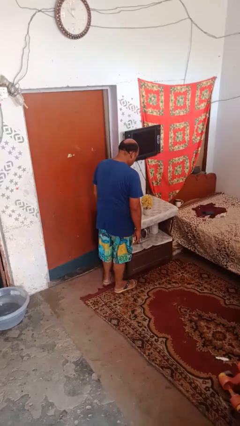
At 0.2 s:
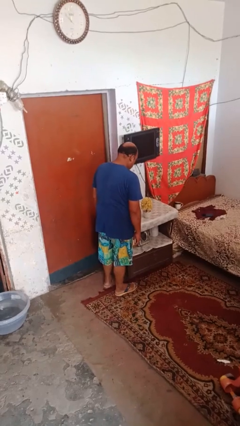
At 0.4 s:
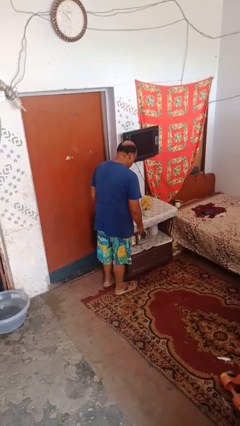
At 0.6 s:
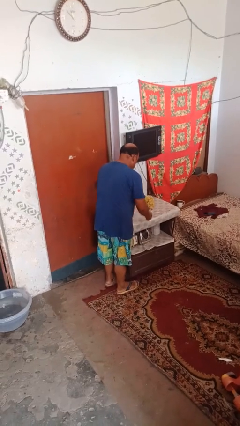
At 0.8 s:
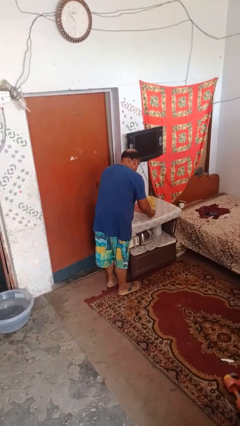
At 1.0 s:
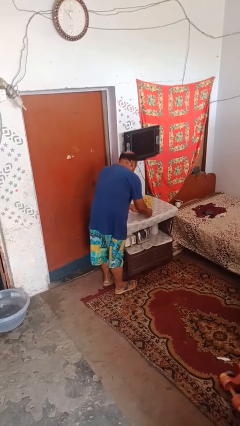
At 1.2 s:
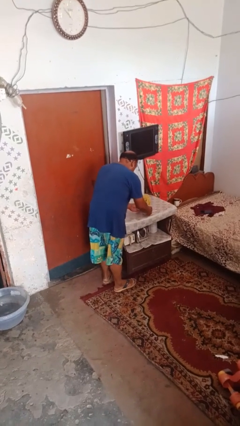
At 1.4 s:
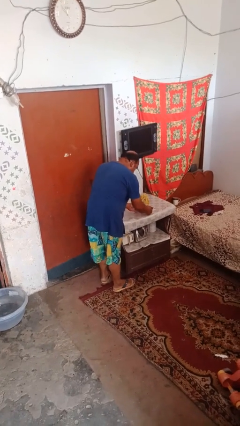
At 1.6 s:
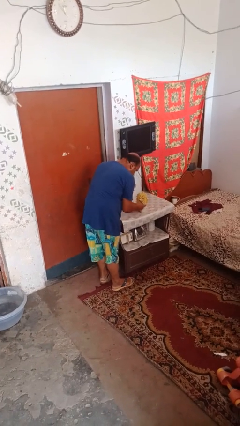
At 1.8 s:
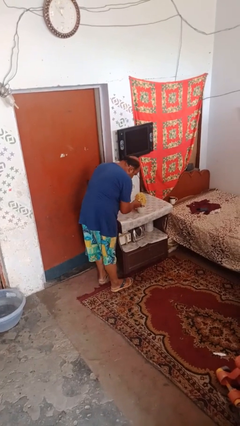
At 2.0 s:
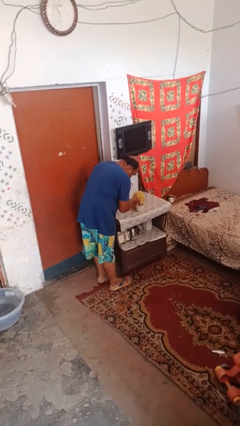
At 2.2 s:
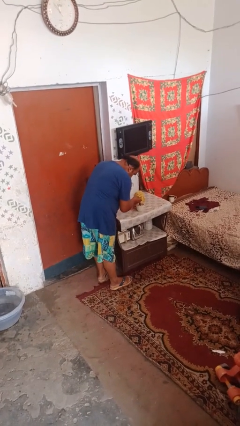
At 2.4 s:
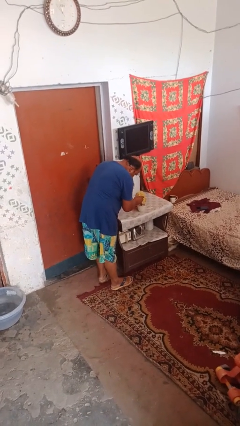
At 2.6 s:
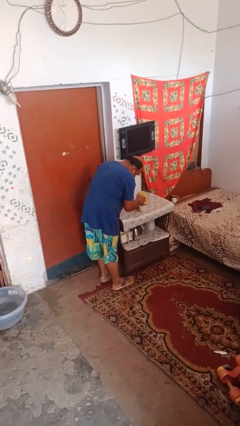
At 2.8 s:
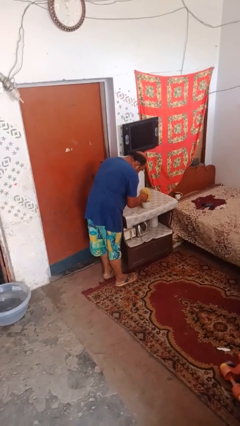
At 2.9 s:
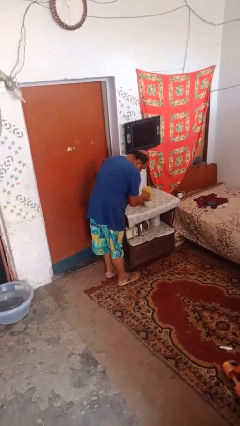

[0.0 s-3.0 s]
person arranges flowers in vase

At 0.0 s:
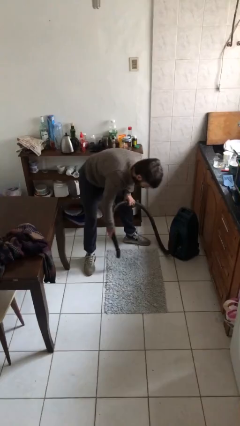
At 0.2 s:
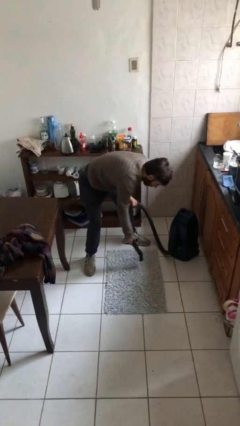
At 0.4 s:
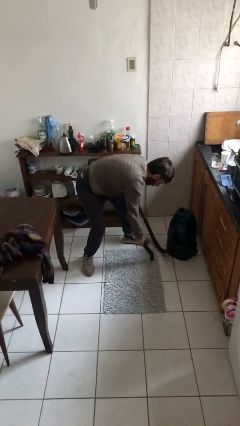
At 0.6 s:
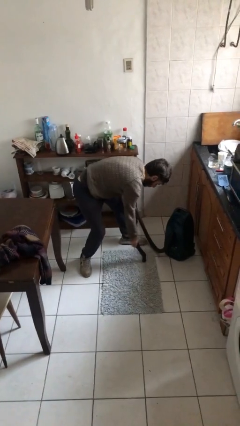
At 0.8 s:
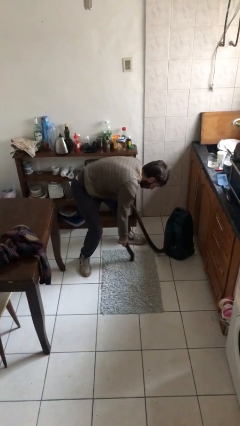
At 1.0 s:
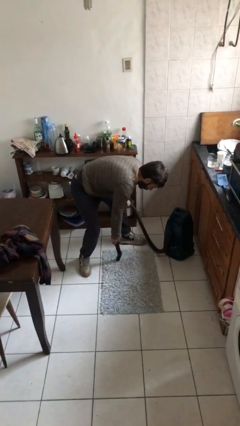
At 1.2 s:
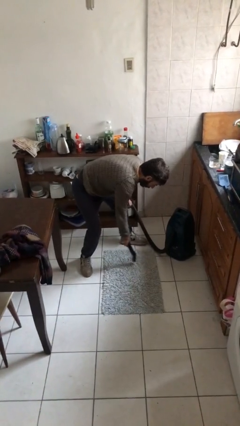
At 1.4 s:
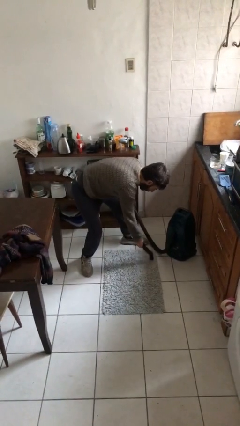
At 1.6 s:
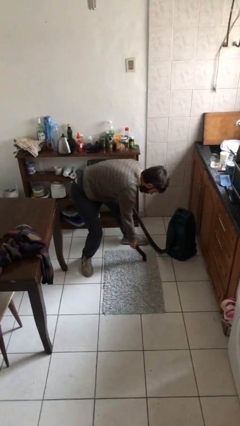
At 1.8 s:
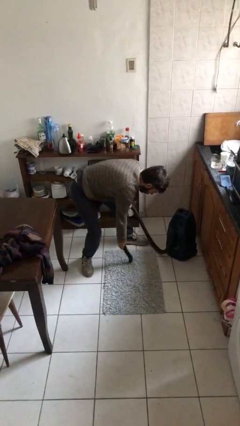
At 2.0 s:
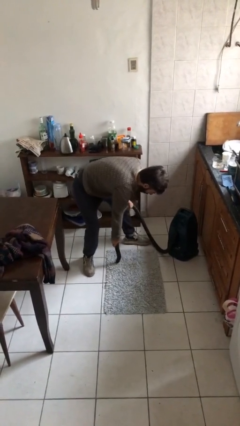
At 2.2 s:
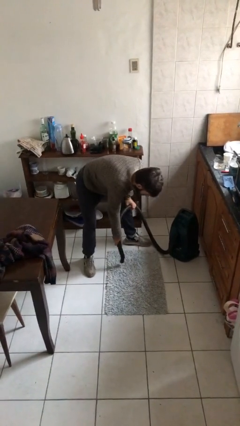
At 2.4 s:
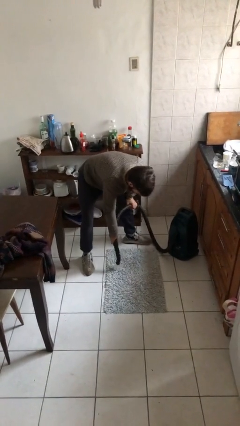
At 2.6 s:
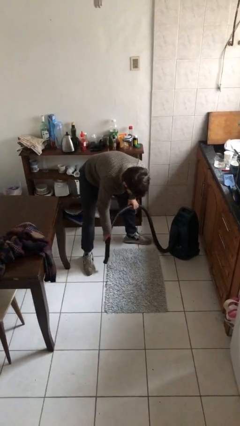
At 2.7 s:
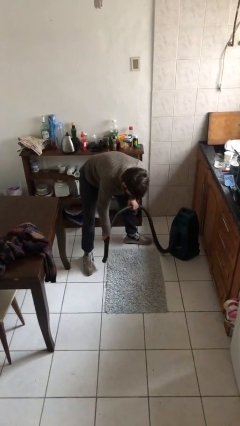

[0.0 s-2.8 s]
person vacuums carpet

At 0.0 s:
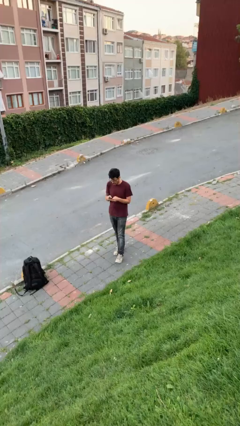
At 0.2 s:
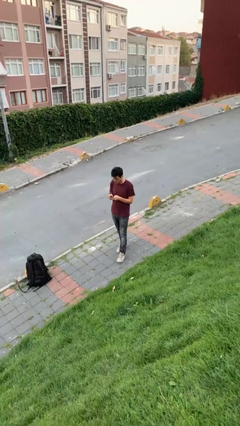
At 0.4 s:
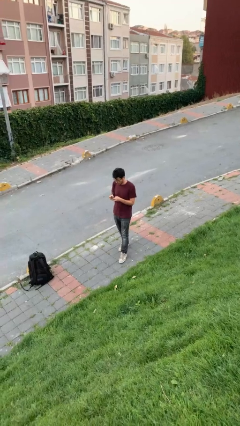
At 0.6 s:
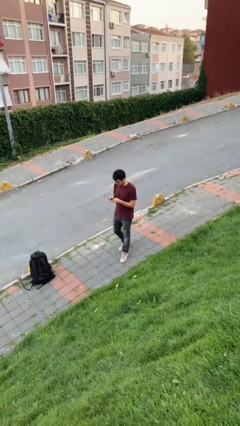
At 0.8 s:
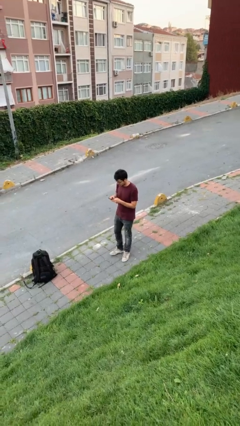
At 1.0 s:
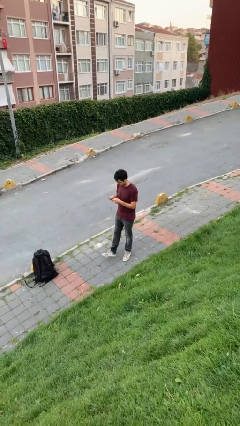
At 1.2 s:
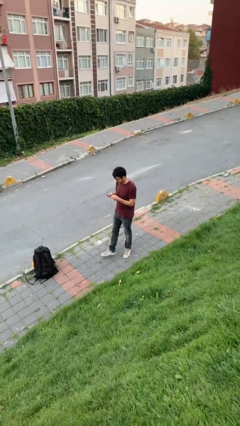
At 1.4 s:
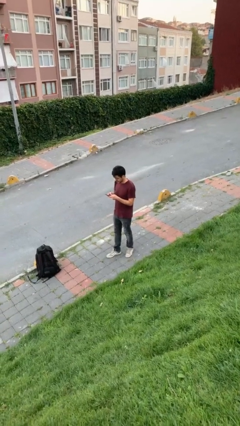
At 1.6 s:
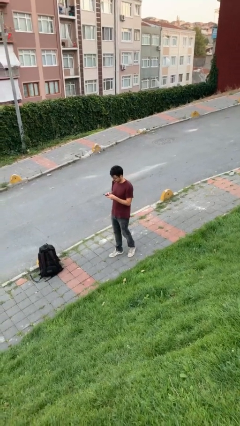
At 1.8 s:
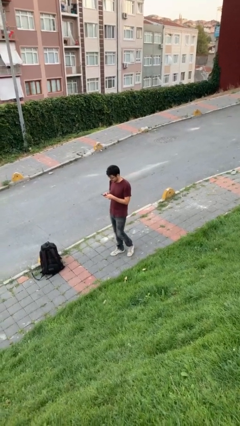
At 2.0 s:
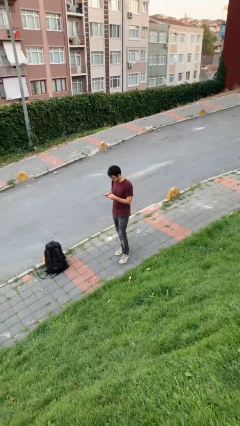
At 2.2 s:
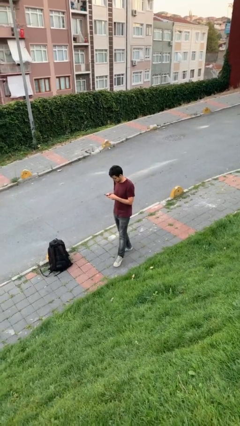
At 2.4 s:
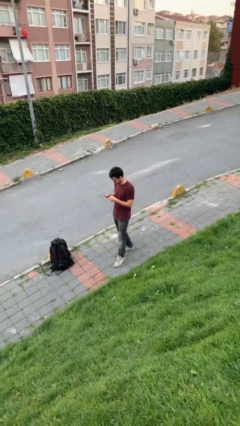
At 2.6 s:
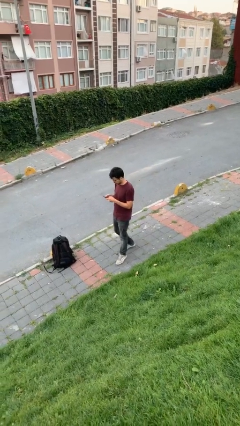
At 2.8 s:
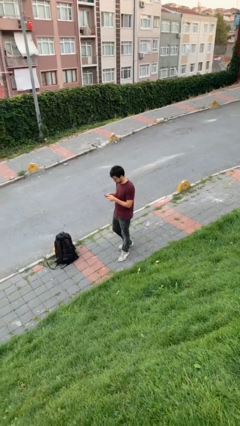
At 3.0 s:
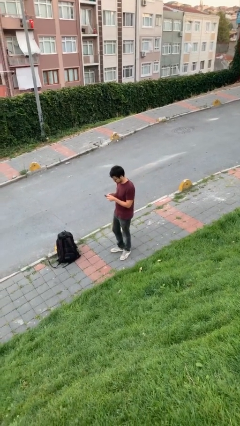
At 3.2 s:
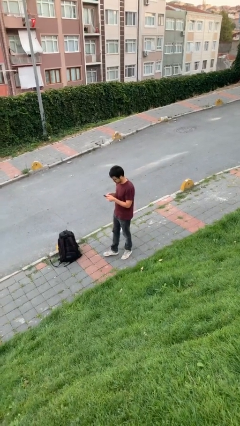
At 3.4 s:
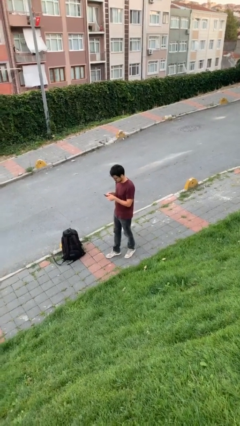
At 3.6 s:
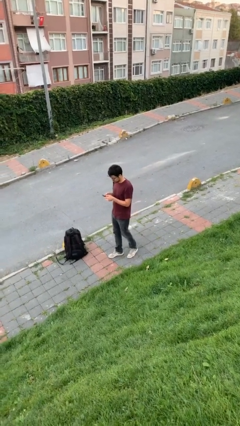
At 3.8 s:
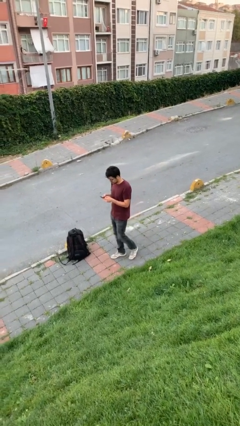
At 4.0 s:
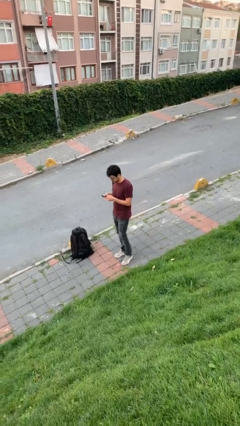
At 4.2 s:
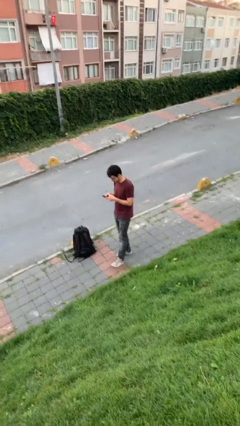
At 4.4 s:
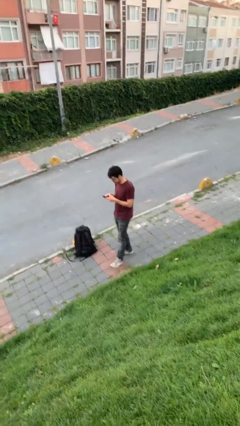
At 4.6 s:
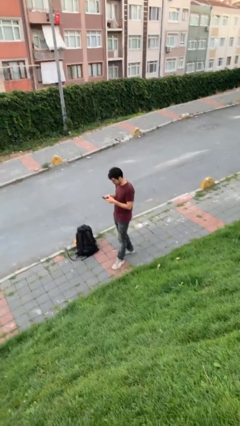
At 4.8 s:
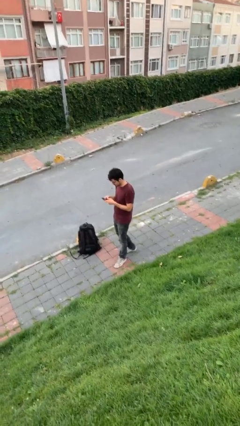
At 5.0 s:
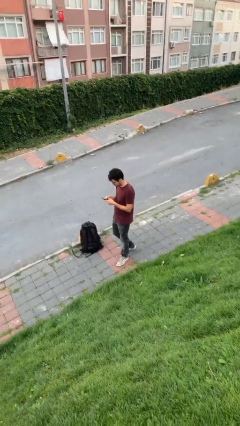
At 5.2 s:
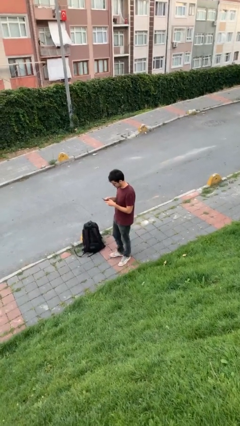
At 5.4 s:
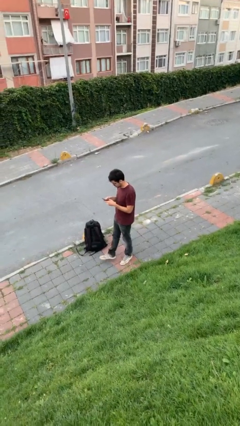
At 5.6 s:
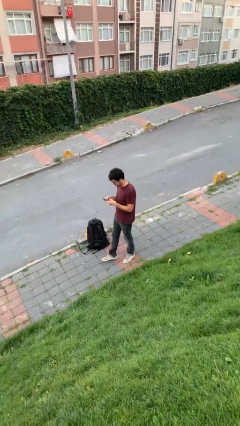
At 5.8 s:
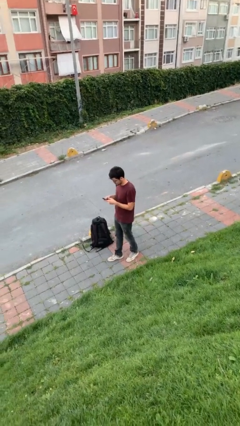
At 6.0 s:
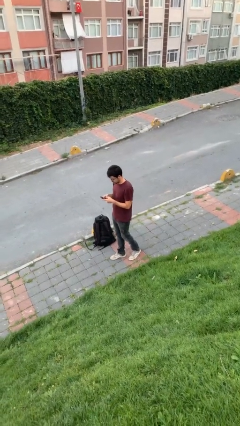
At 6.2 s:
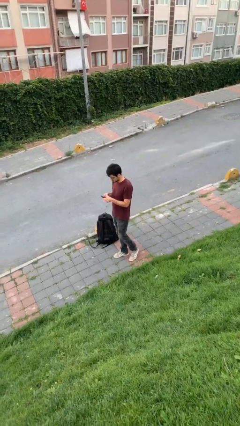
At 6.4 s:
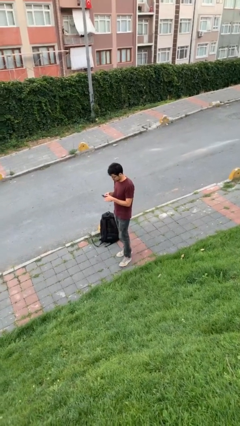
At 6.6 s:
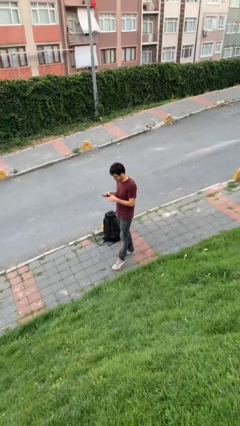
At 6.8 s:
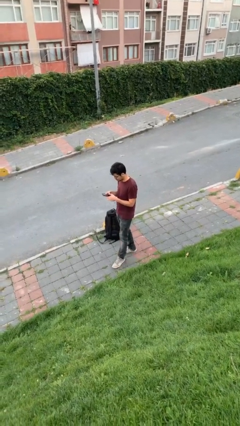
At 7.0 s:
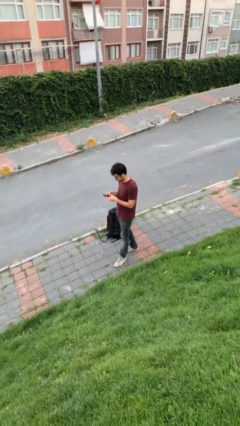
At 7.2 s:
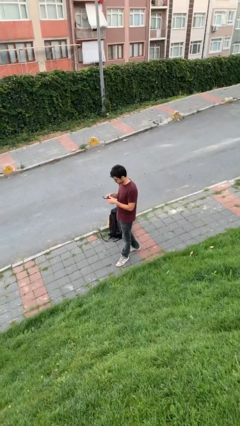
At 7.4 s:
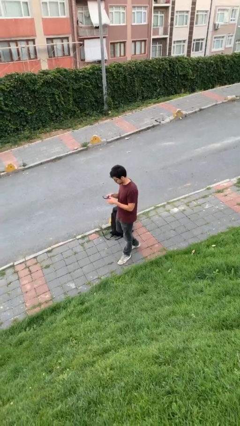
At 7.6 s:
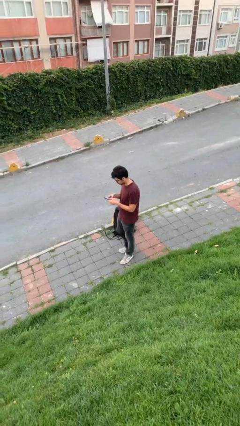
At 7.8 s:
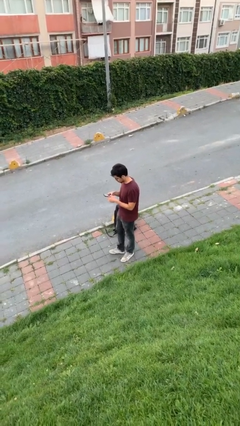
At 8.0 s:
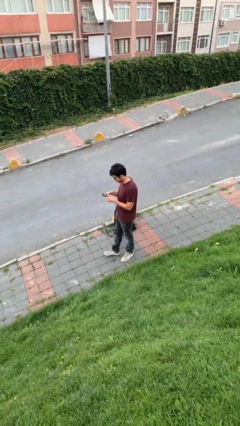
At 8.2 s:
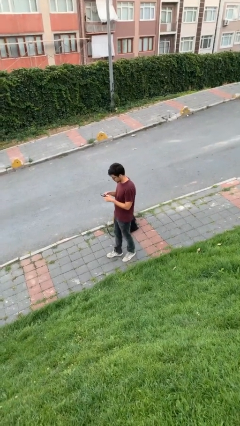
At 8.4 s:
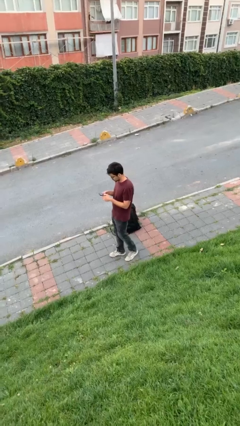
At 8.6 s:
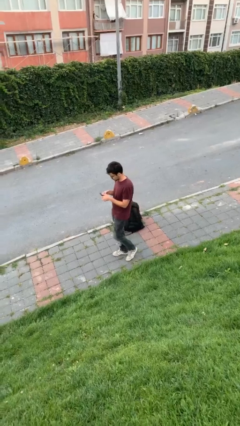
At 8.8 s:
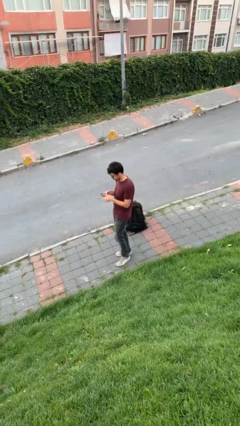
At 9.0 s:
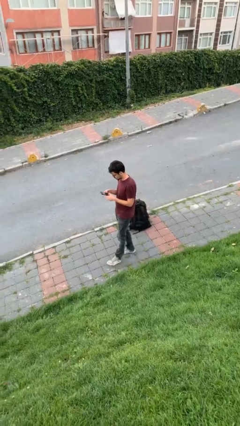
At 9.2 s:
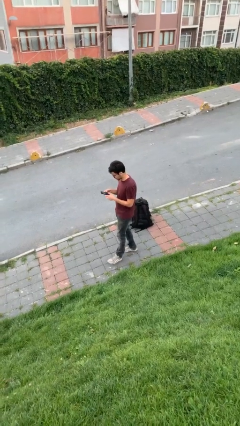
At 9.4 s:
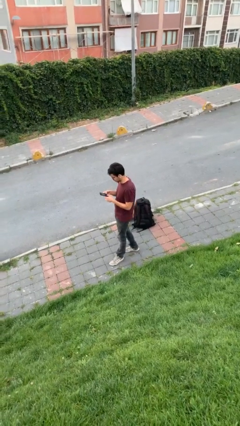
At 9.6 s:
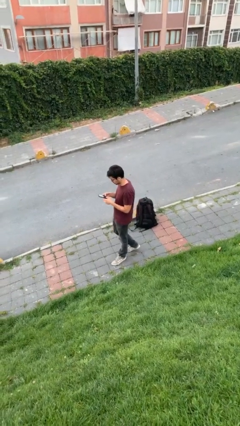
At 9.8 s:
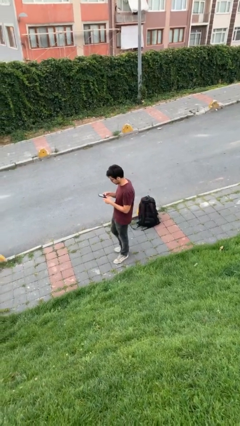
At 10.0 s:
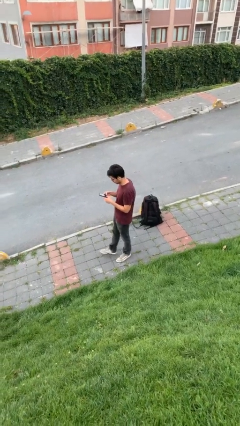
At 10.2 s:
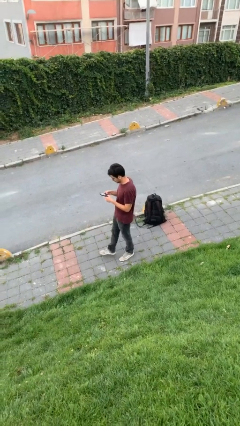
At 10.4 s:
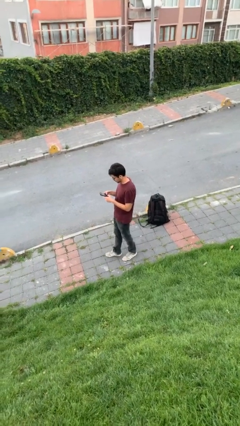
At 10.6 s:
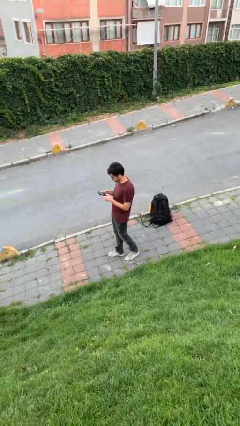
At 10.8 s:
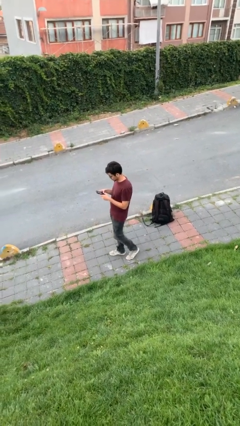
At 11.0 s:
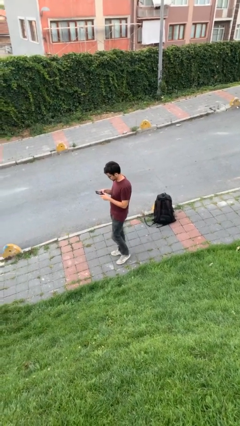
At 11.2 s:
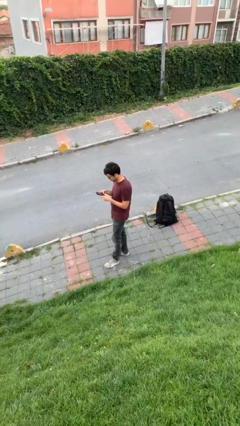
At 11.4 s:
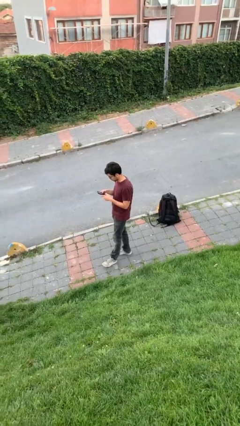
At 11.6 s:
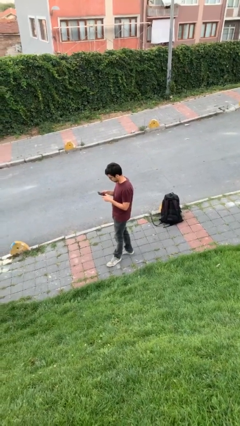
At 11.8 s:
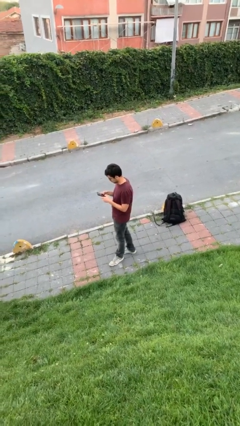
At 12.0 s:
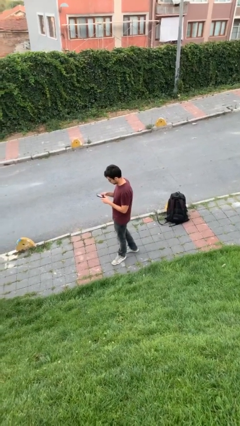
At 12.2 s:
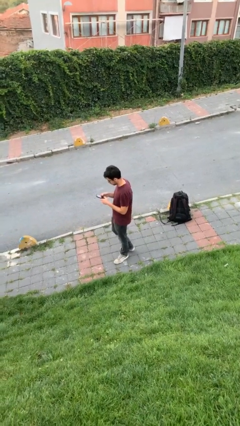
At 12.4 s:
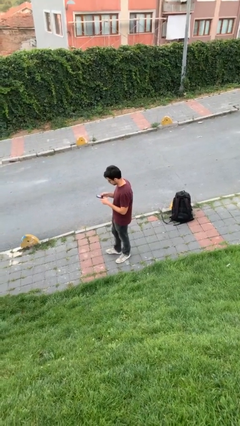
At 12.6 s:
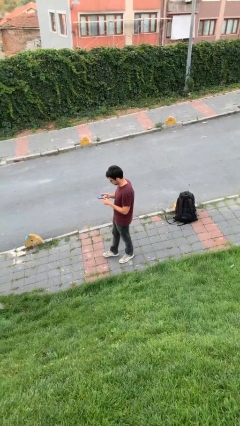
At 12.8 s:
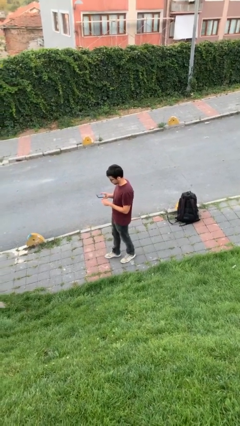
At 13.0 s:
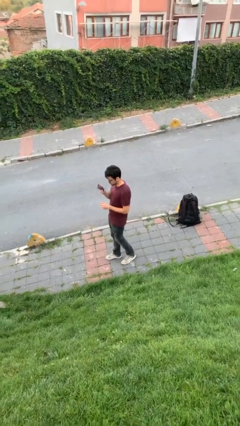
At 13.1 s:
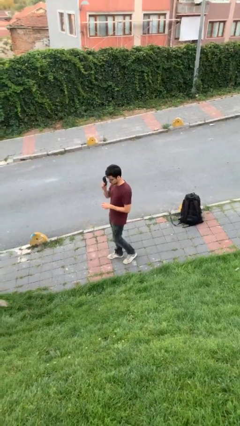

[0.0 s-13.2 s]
person texts on phone
